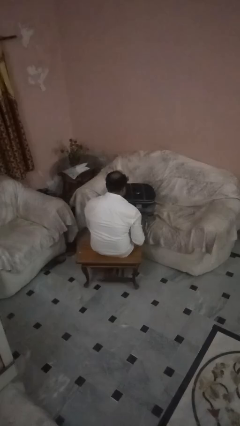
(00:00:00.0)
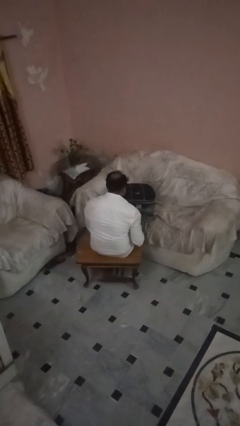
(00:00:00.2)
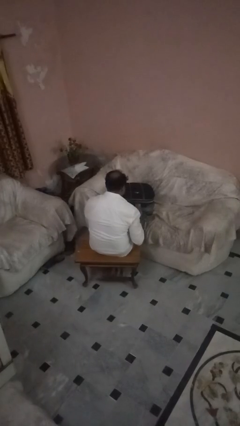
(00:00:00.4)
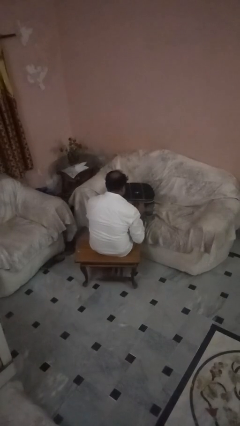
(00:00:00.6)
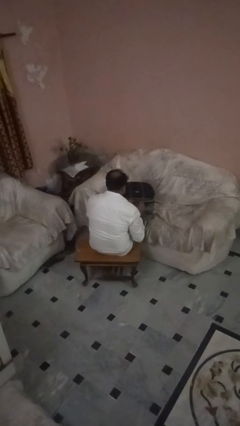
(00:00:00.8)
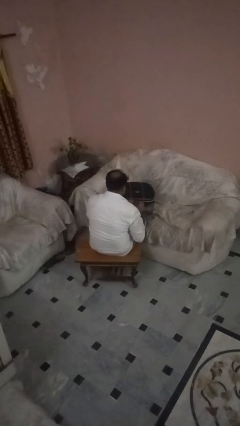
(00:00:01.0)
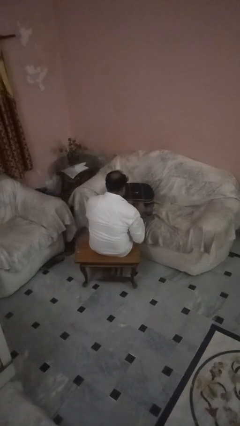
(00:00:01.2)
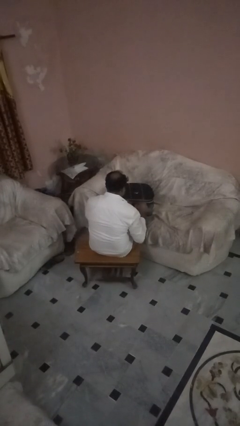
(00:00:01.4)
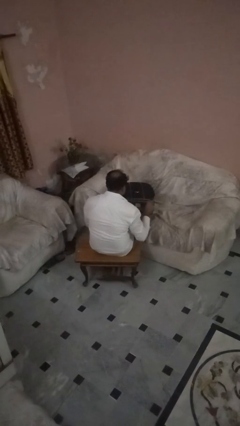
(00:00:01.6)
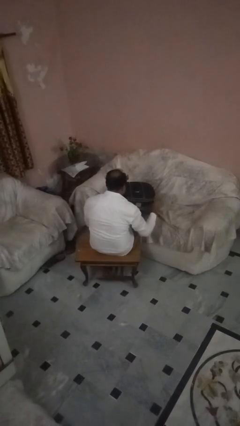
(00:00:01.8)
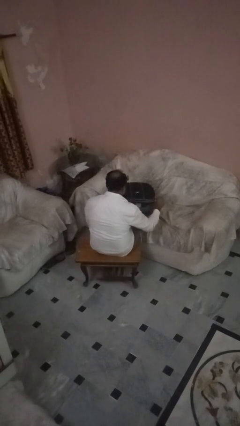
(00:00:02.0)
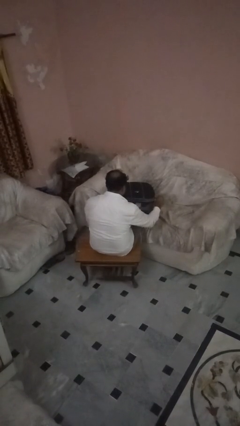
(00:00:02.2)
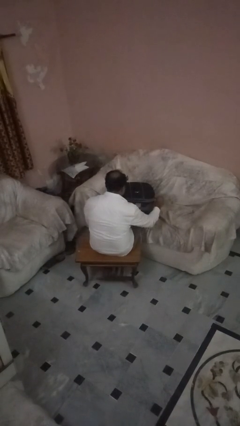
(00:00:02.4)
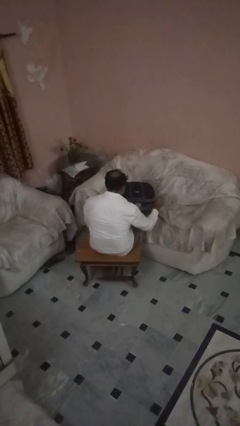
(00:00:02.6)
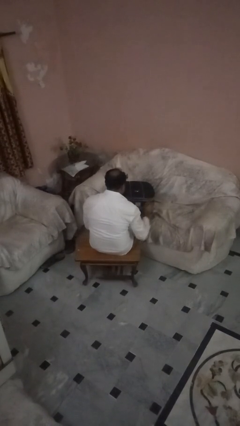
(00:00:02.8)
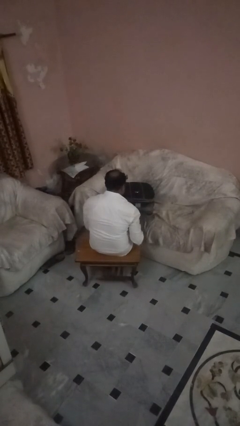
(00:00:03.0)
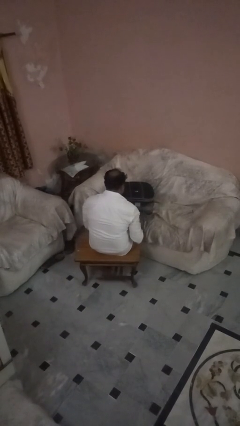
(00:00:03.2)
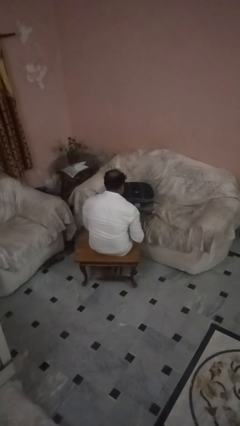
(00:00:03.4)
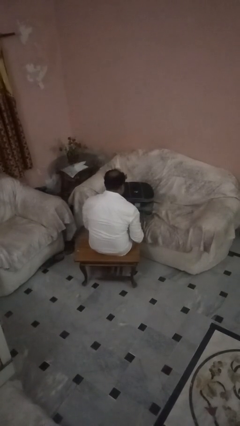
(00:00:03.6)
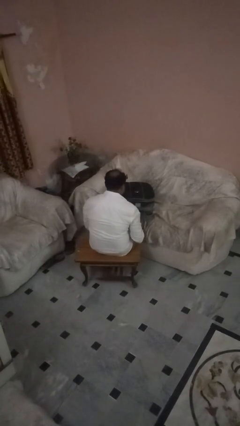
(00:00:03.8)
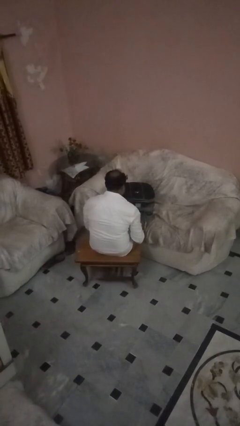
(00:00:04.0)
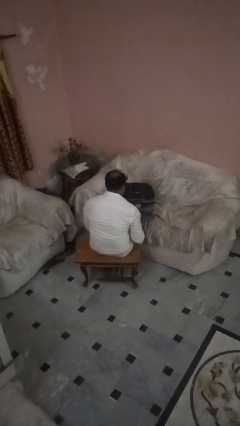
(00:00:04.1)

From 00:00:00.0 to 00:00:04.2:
person opens suitcase

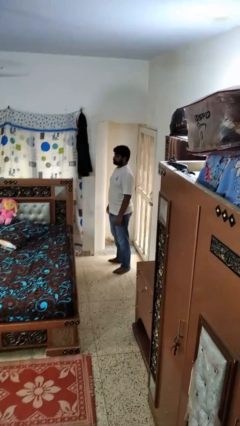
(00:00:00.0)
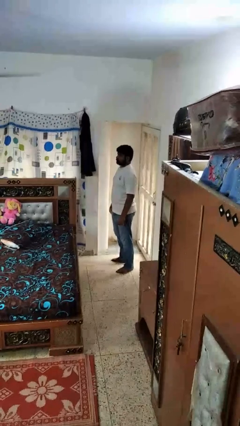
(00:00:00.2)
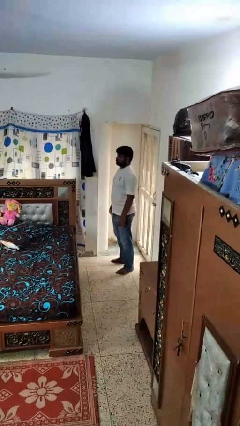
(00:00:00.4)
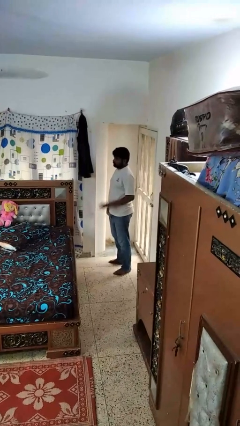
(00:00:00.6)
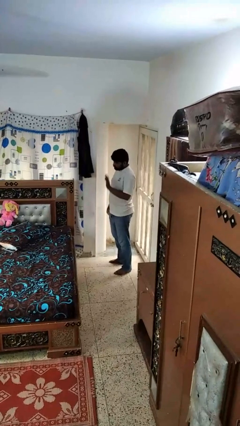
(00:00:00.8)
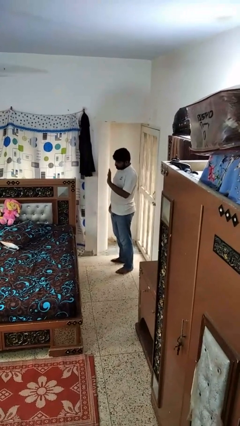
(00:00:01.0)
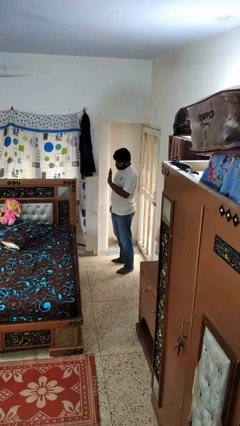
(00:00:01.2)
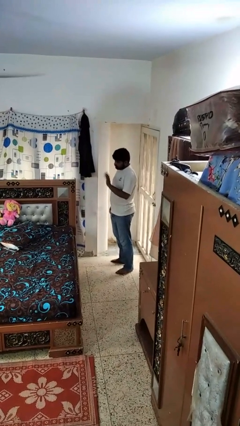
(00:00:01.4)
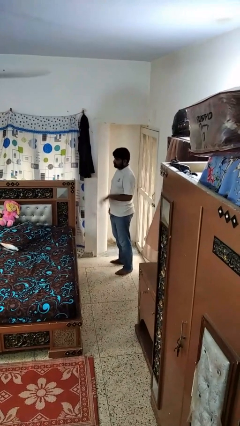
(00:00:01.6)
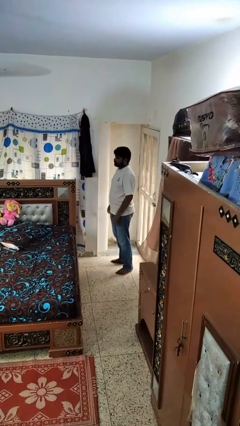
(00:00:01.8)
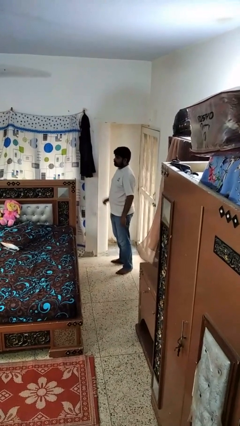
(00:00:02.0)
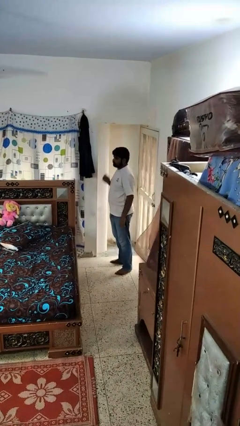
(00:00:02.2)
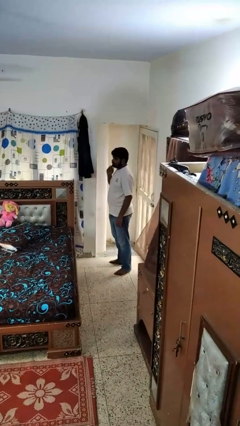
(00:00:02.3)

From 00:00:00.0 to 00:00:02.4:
person waves at person

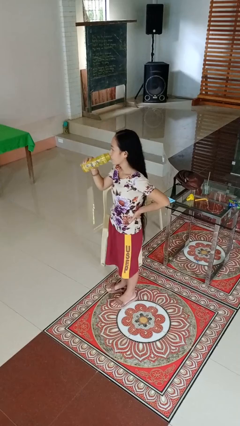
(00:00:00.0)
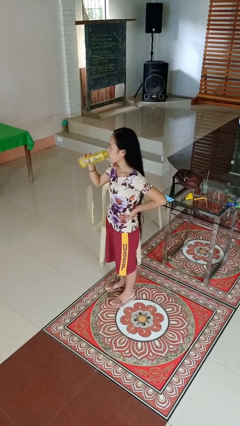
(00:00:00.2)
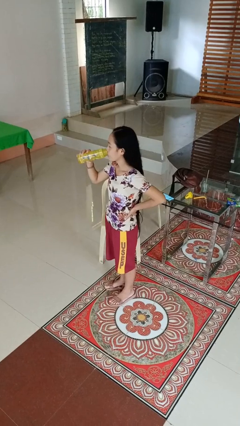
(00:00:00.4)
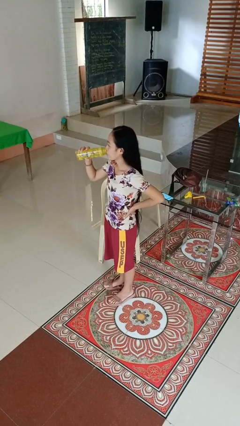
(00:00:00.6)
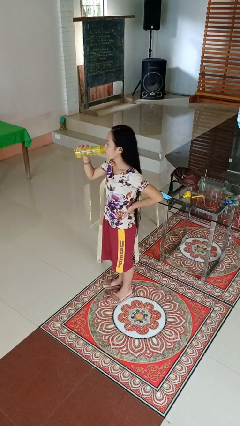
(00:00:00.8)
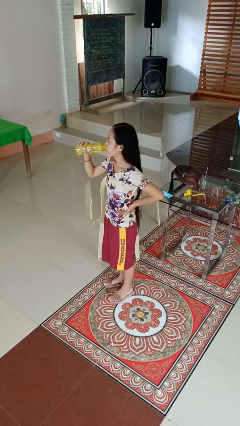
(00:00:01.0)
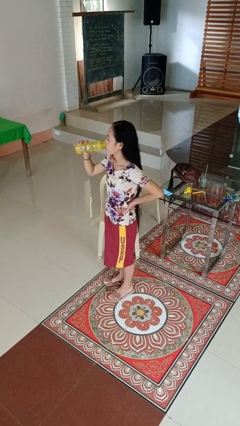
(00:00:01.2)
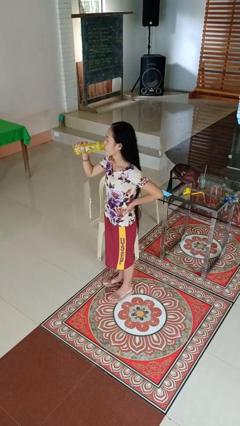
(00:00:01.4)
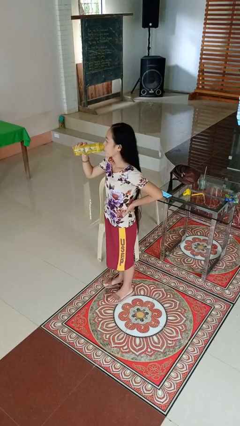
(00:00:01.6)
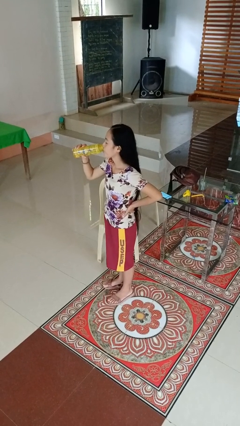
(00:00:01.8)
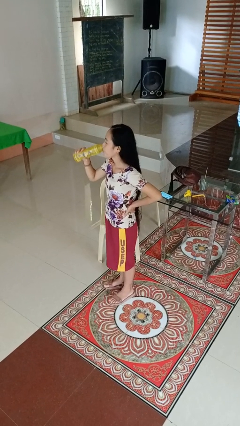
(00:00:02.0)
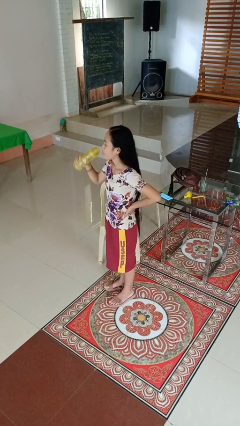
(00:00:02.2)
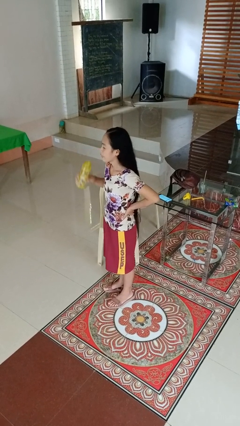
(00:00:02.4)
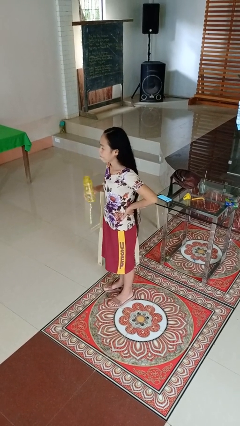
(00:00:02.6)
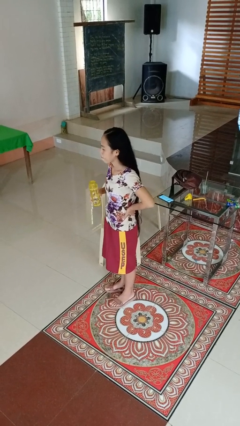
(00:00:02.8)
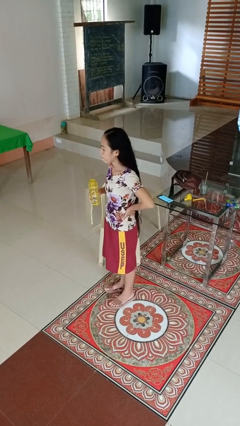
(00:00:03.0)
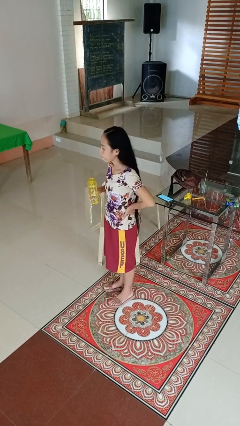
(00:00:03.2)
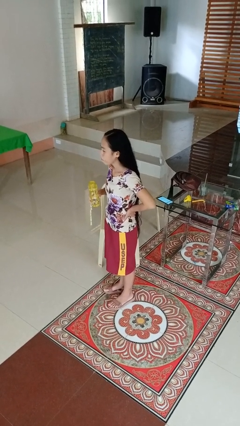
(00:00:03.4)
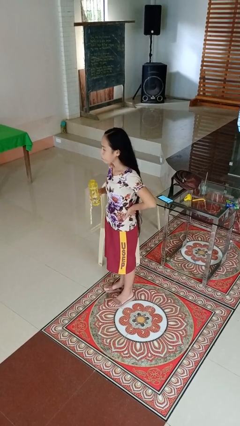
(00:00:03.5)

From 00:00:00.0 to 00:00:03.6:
person drinks from bottle

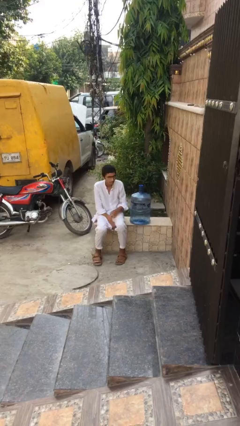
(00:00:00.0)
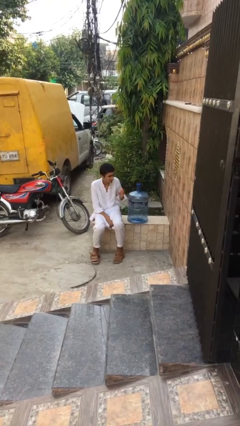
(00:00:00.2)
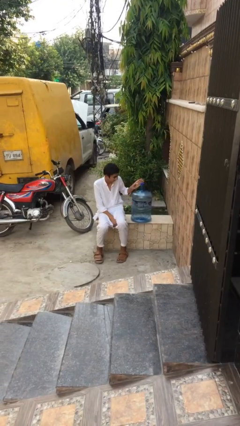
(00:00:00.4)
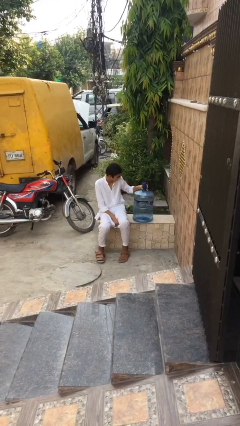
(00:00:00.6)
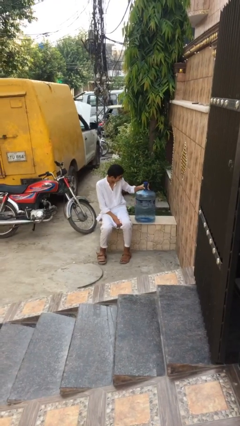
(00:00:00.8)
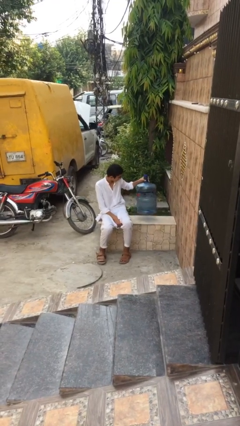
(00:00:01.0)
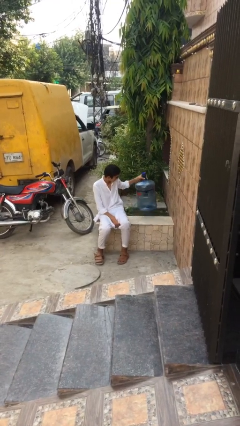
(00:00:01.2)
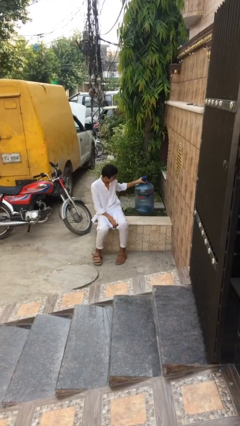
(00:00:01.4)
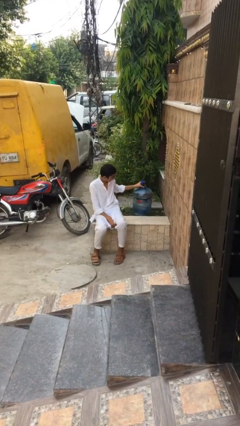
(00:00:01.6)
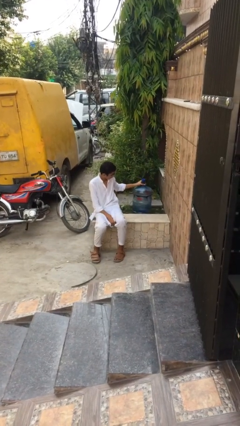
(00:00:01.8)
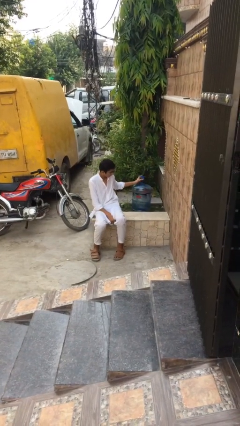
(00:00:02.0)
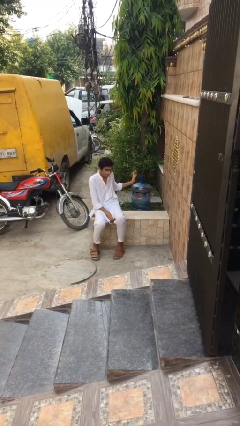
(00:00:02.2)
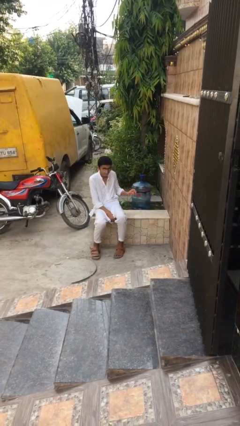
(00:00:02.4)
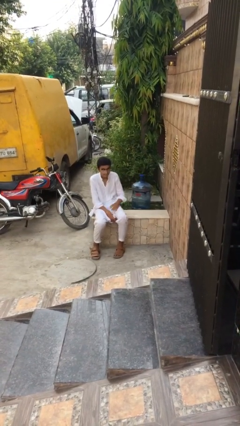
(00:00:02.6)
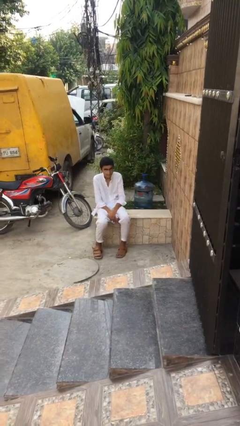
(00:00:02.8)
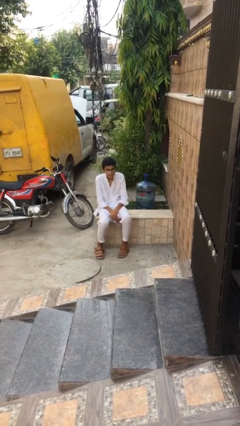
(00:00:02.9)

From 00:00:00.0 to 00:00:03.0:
person puts down object on floor

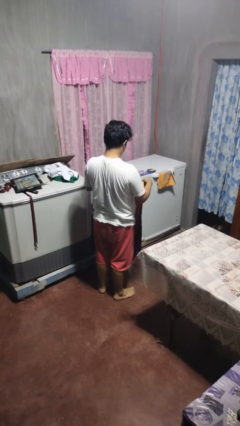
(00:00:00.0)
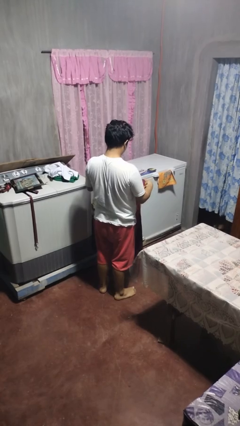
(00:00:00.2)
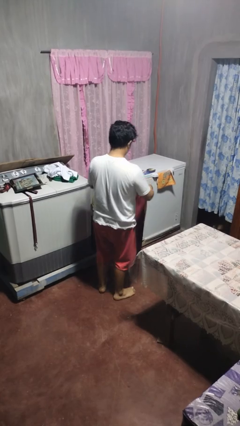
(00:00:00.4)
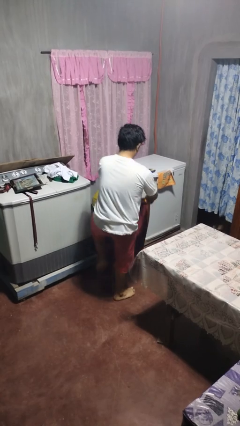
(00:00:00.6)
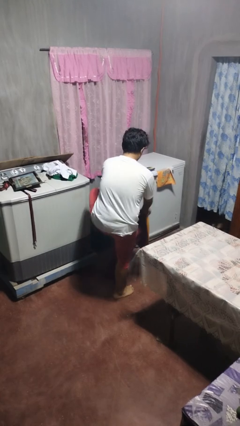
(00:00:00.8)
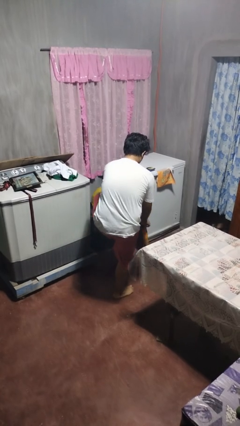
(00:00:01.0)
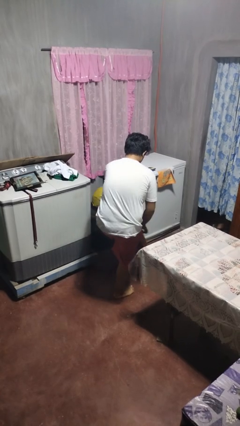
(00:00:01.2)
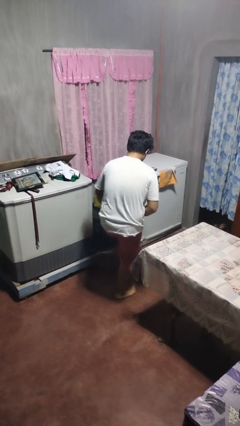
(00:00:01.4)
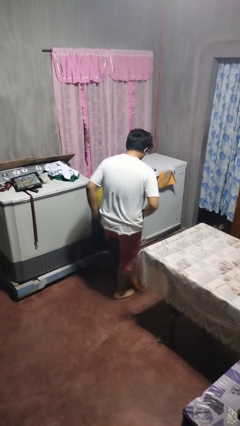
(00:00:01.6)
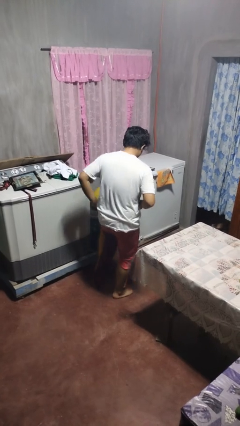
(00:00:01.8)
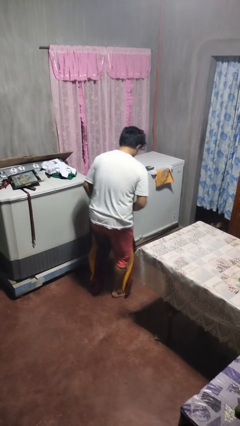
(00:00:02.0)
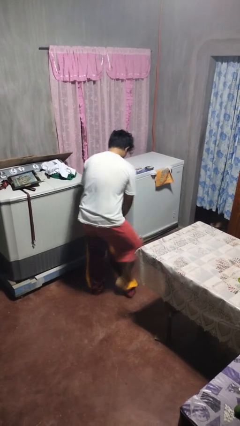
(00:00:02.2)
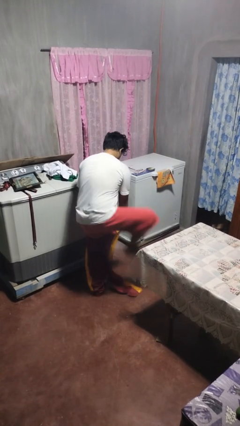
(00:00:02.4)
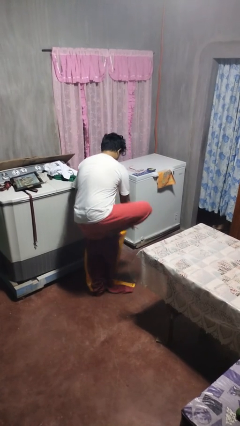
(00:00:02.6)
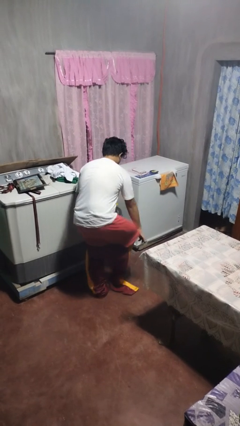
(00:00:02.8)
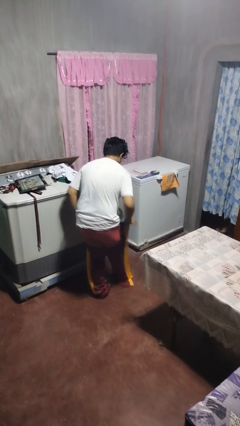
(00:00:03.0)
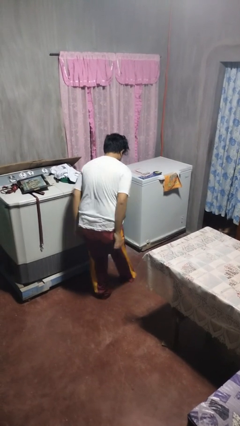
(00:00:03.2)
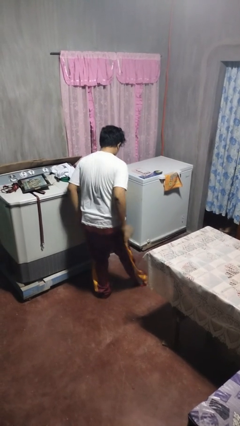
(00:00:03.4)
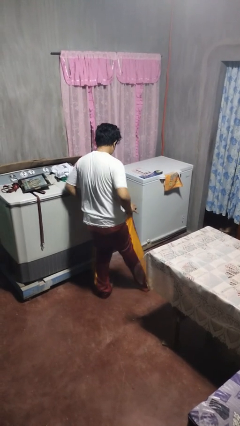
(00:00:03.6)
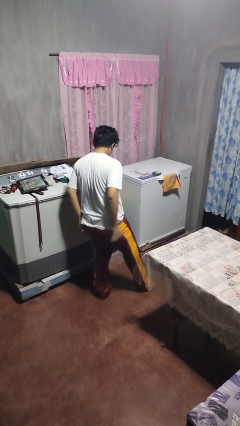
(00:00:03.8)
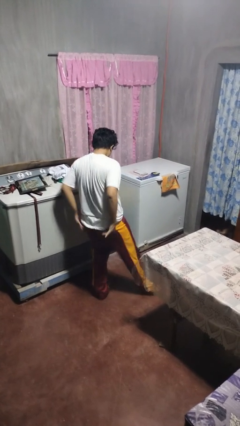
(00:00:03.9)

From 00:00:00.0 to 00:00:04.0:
person puts on pants
